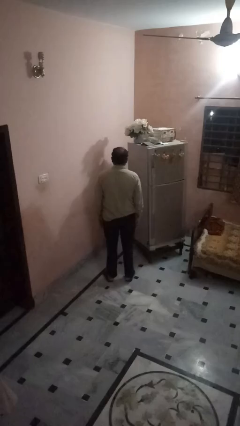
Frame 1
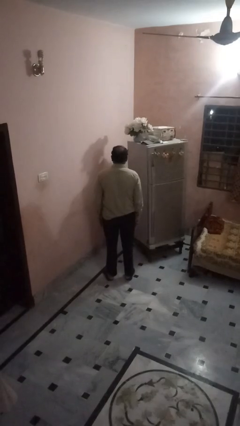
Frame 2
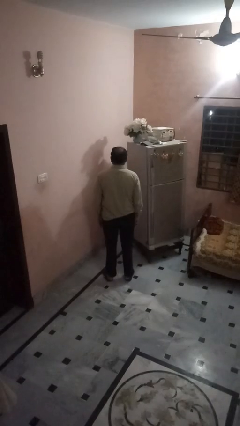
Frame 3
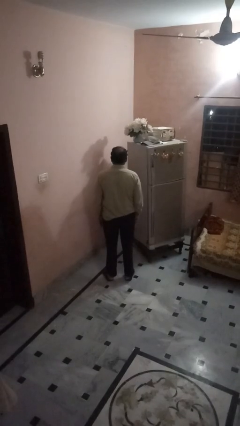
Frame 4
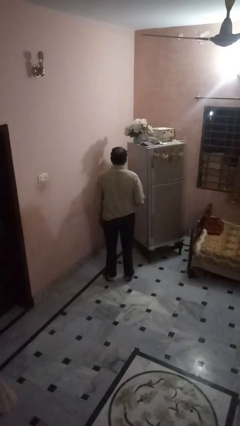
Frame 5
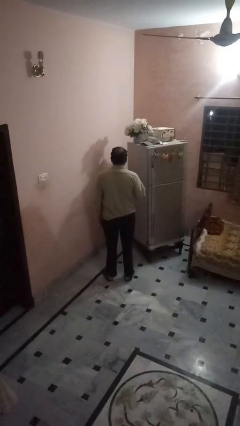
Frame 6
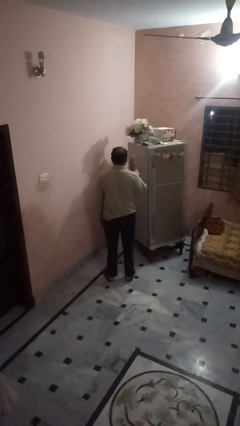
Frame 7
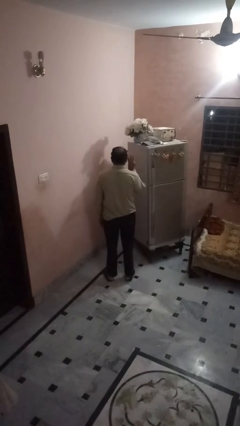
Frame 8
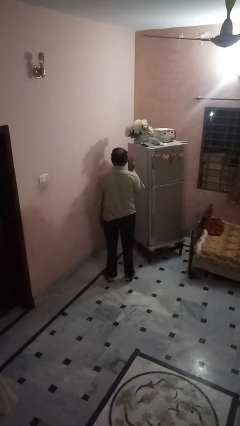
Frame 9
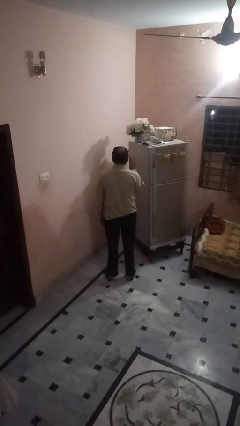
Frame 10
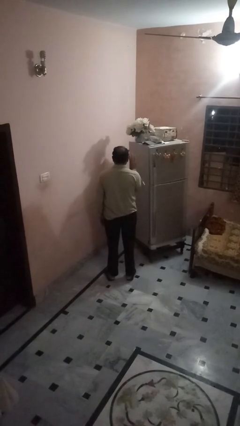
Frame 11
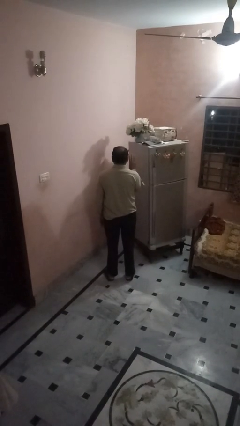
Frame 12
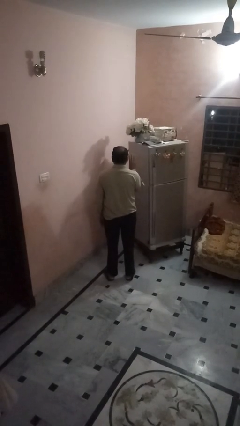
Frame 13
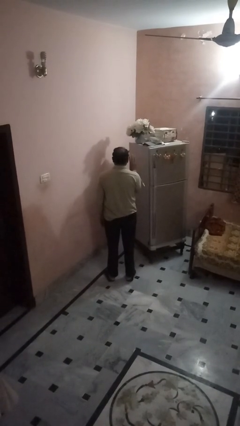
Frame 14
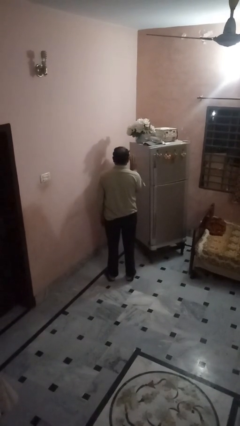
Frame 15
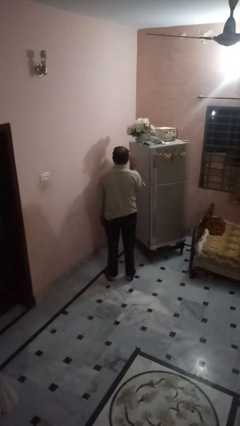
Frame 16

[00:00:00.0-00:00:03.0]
person gestures number three

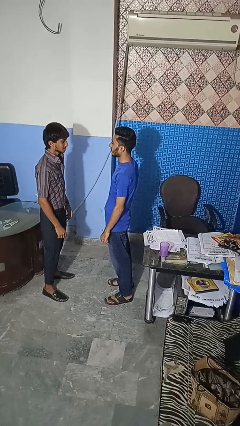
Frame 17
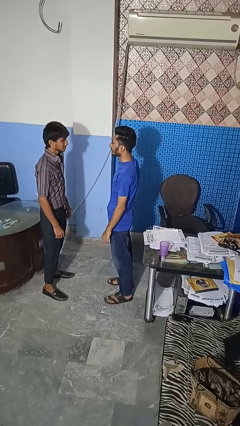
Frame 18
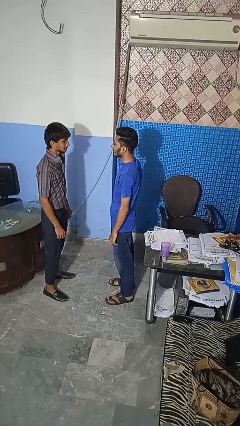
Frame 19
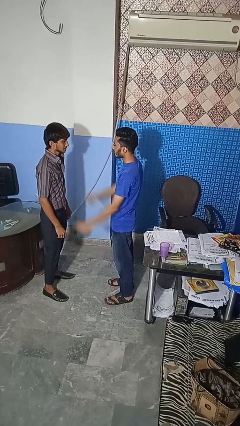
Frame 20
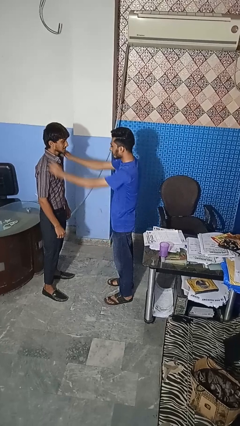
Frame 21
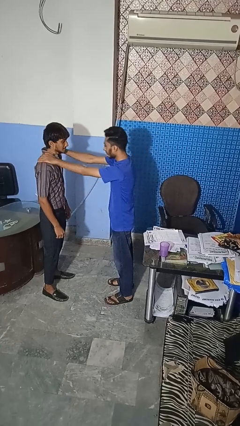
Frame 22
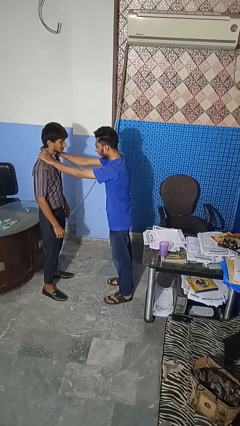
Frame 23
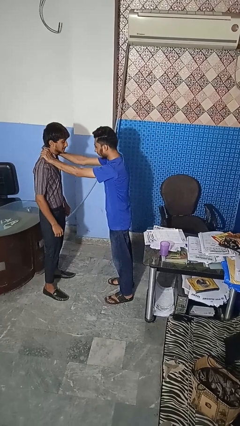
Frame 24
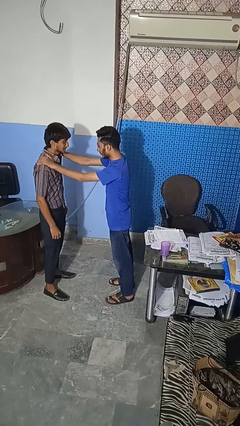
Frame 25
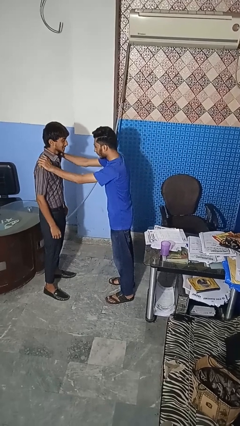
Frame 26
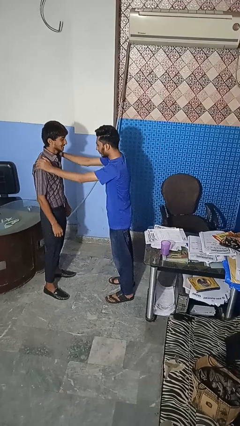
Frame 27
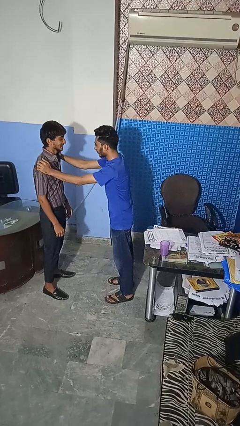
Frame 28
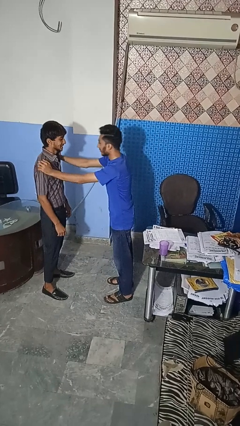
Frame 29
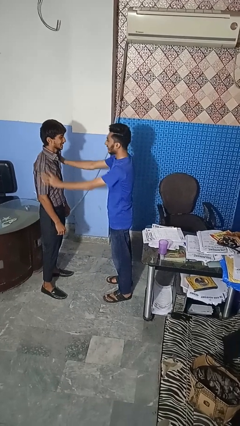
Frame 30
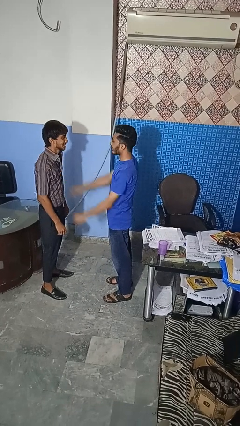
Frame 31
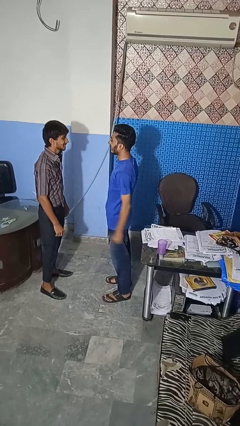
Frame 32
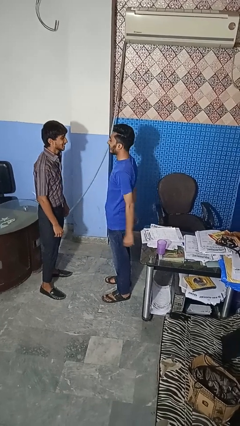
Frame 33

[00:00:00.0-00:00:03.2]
person pounds shoulders of person

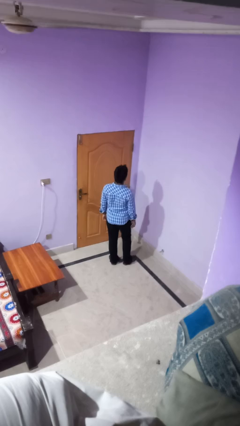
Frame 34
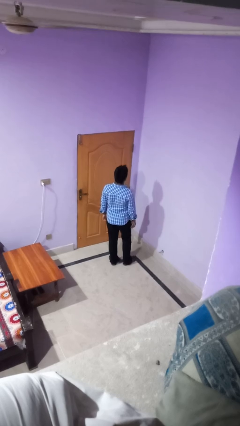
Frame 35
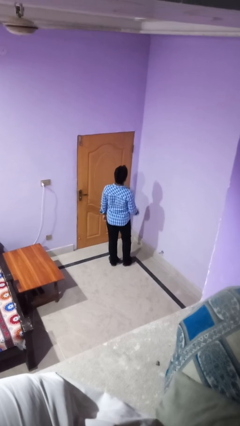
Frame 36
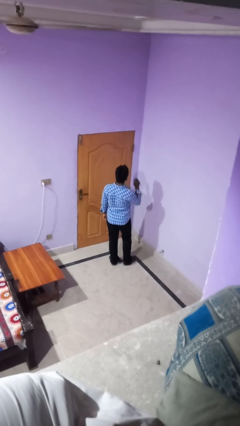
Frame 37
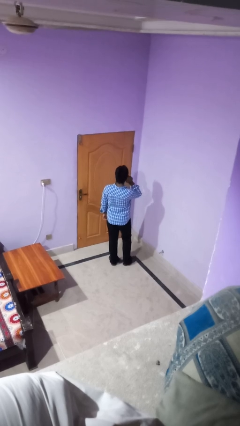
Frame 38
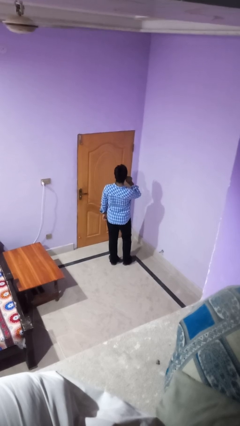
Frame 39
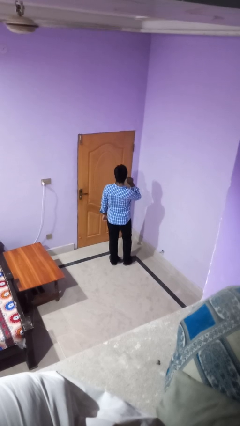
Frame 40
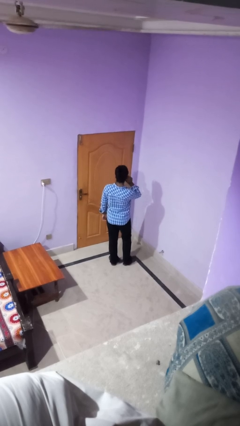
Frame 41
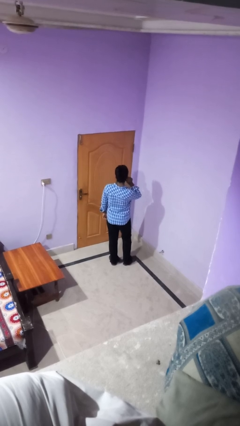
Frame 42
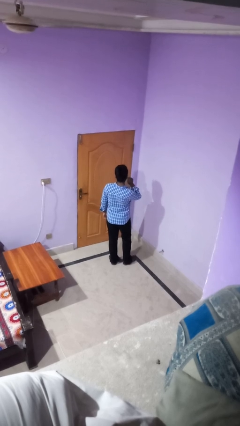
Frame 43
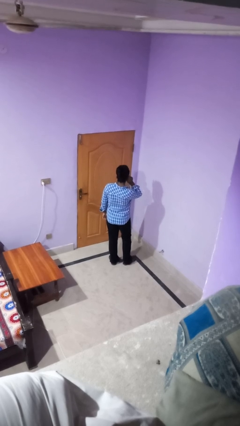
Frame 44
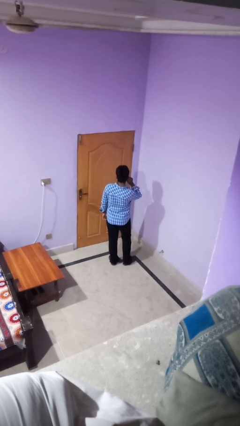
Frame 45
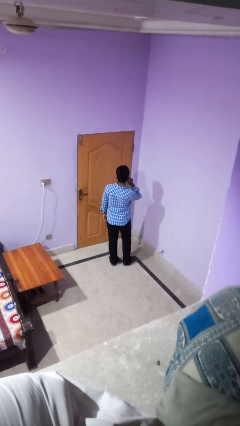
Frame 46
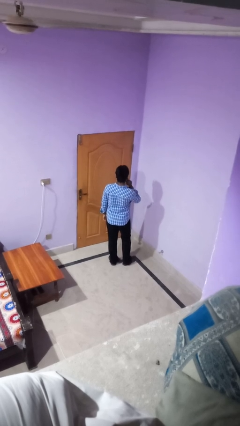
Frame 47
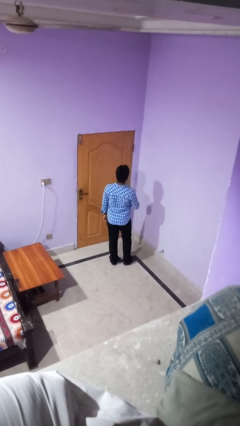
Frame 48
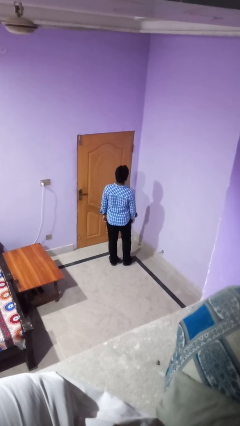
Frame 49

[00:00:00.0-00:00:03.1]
person touches earlobe

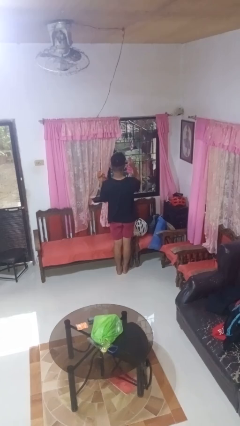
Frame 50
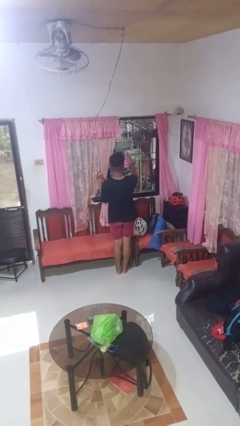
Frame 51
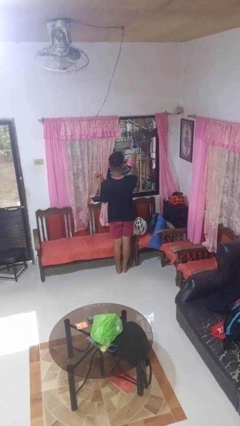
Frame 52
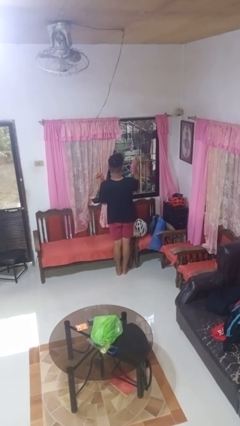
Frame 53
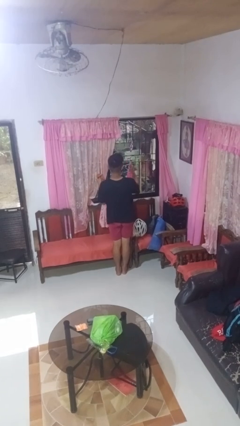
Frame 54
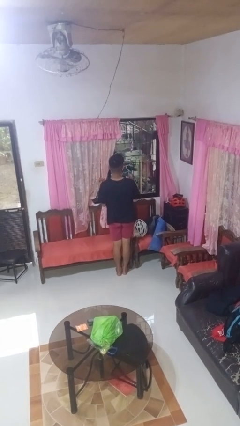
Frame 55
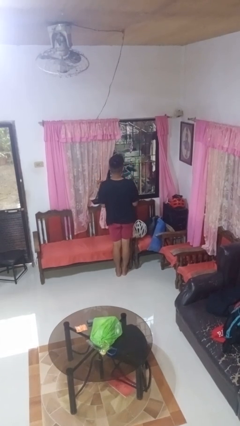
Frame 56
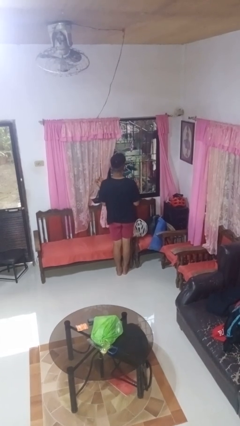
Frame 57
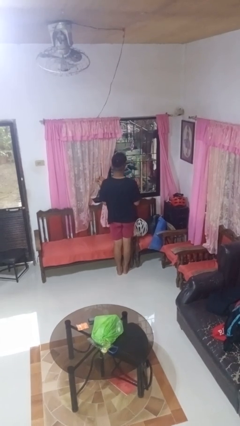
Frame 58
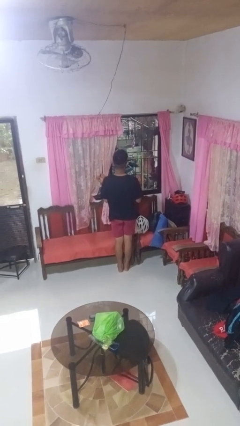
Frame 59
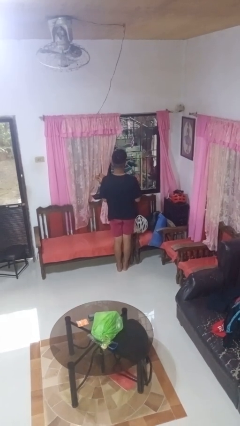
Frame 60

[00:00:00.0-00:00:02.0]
person sprays from bottle

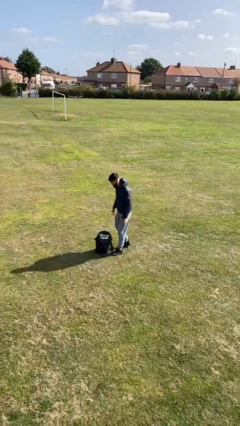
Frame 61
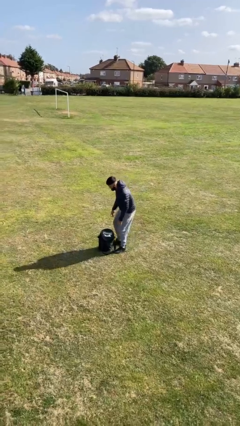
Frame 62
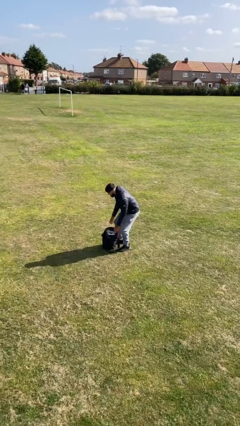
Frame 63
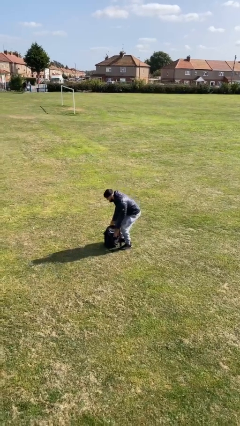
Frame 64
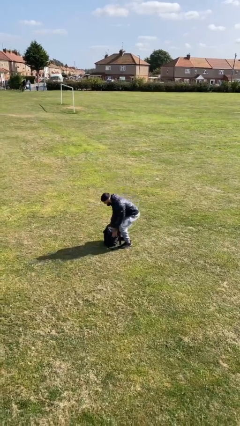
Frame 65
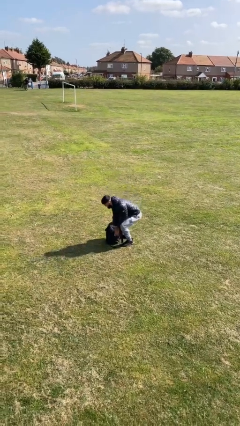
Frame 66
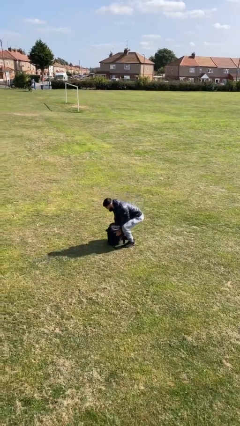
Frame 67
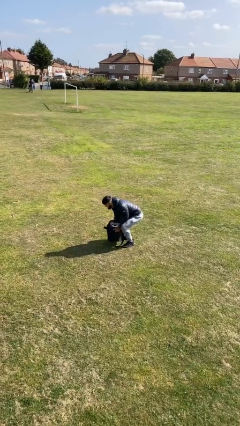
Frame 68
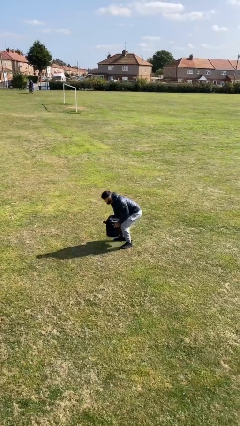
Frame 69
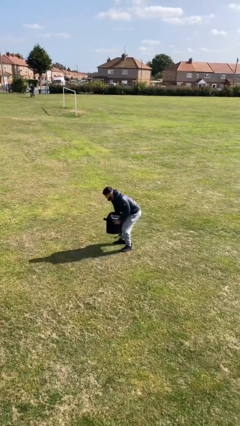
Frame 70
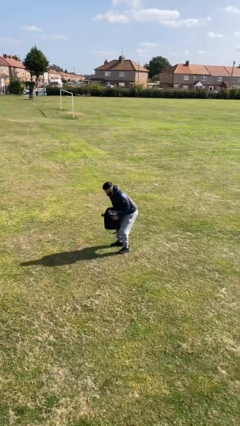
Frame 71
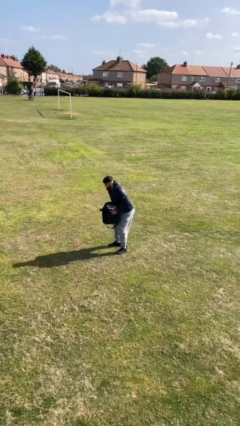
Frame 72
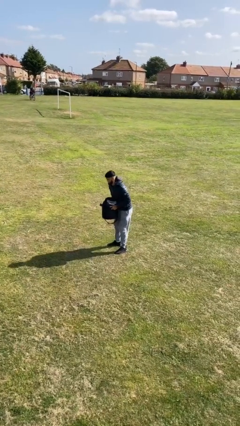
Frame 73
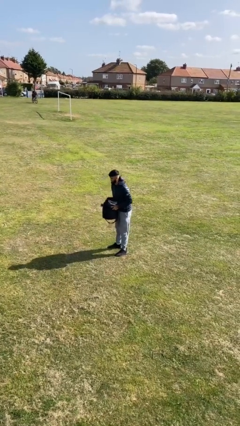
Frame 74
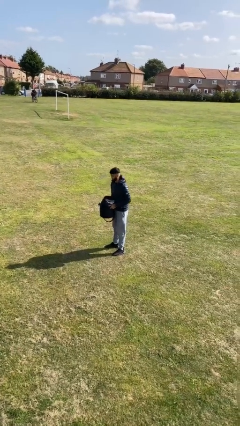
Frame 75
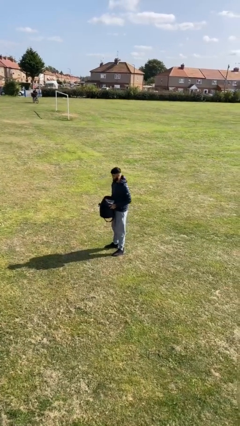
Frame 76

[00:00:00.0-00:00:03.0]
person picks up object from floor

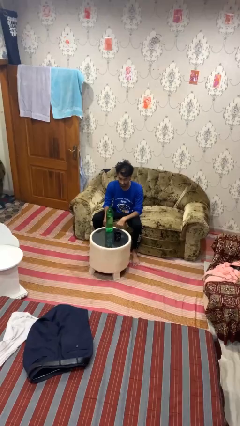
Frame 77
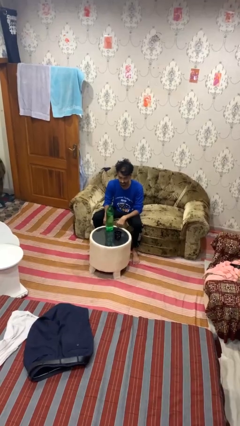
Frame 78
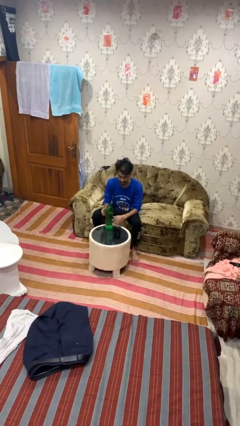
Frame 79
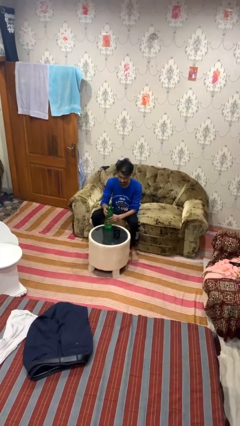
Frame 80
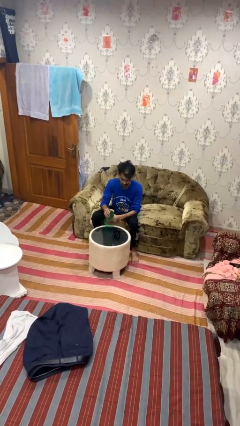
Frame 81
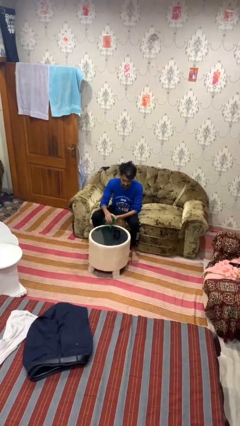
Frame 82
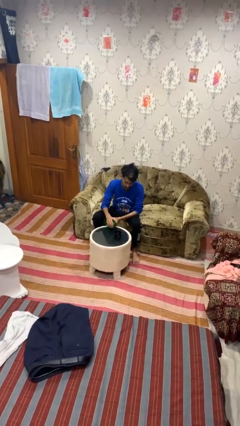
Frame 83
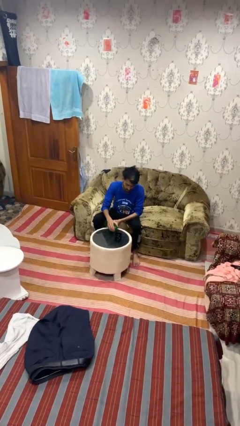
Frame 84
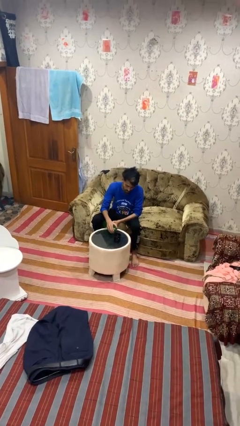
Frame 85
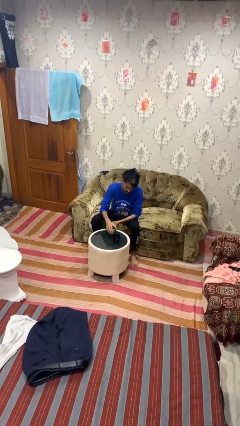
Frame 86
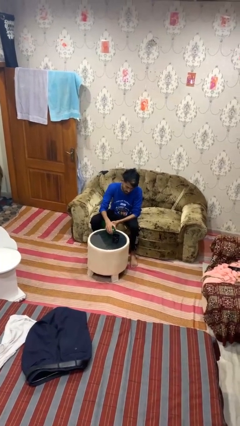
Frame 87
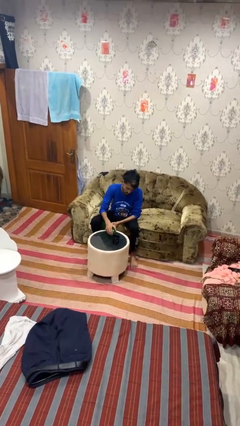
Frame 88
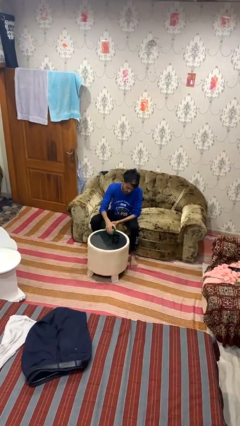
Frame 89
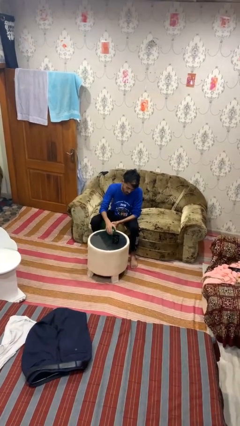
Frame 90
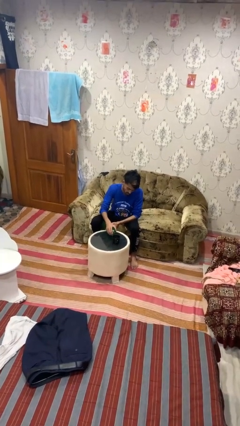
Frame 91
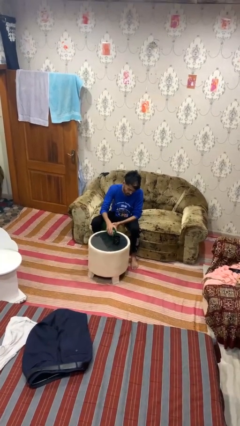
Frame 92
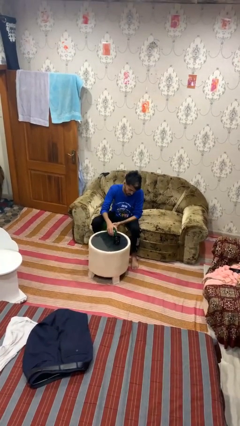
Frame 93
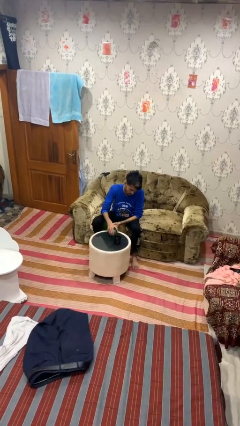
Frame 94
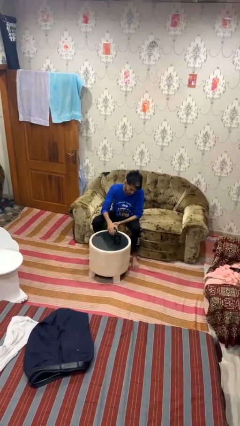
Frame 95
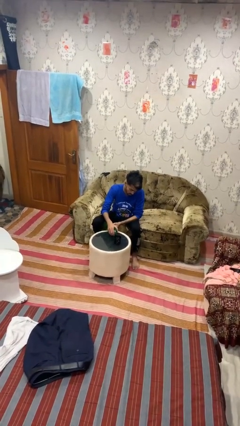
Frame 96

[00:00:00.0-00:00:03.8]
person pours liquid into cup
